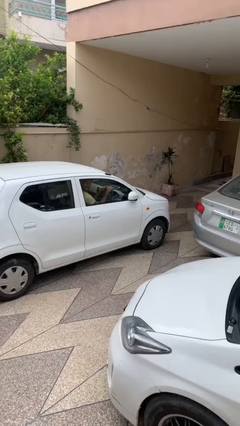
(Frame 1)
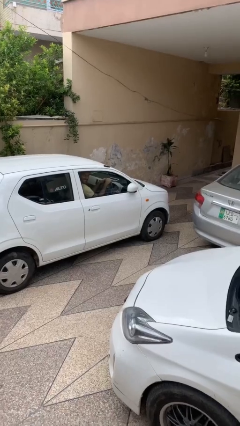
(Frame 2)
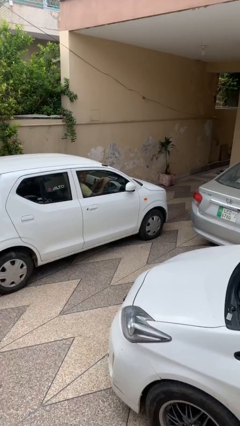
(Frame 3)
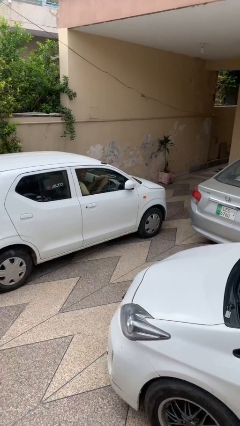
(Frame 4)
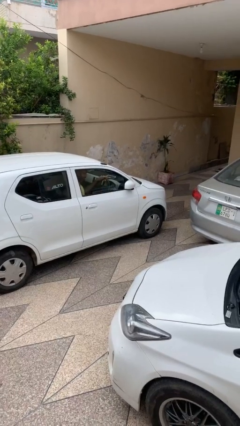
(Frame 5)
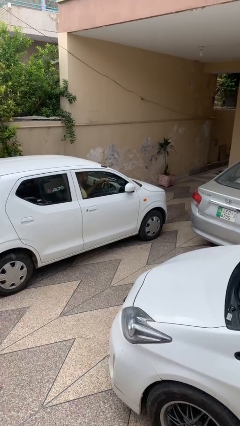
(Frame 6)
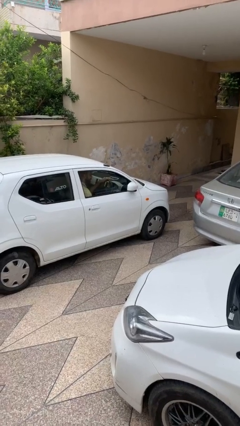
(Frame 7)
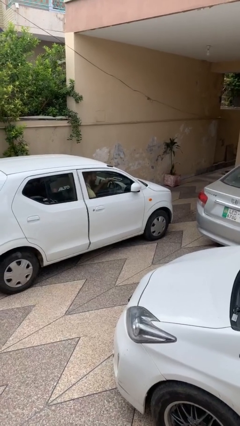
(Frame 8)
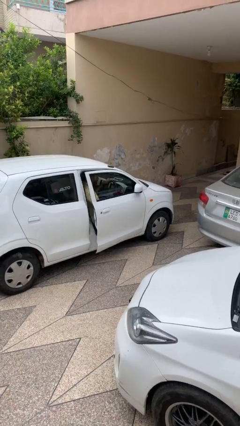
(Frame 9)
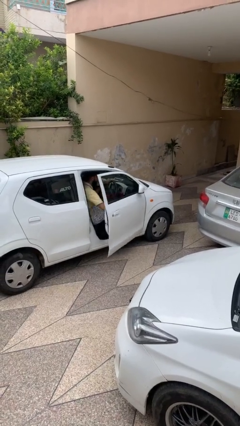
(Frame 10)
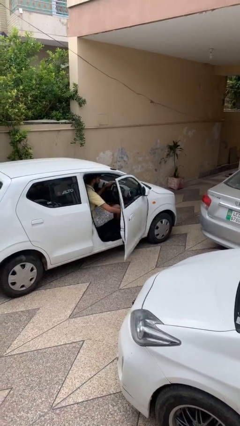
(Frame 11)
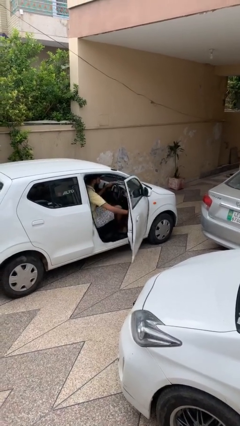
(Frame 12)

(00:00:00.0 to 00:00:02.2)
person opens car door

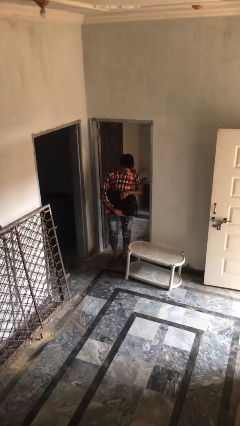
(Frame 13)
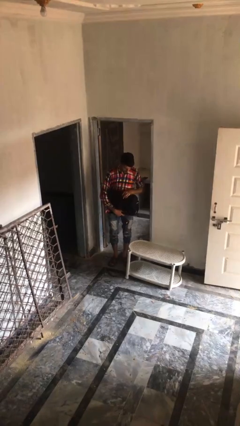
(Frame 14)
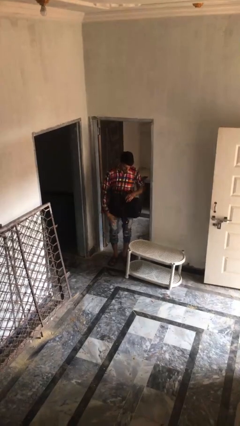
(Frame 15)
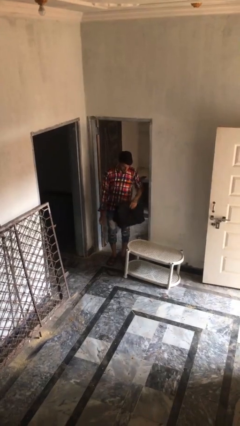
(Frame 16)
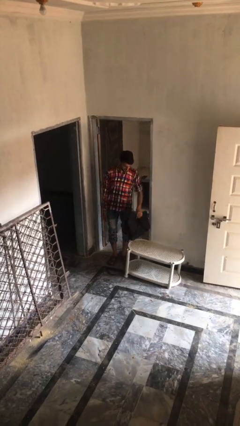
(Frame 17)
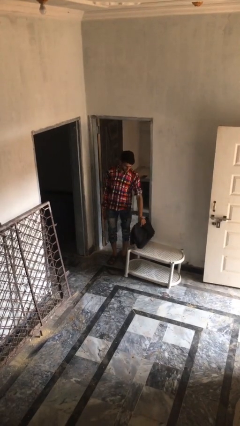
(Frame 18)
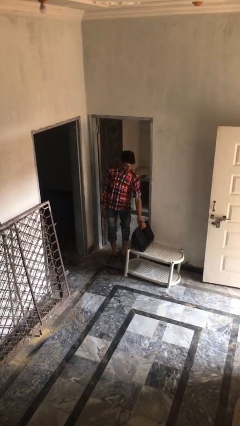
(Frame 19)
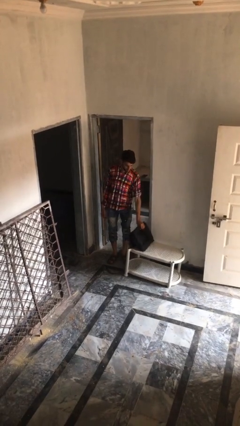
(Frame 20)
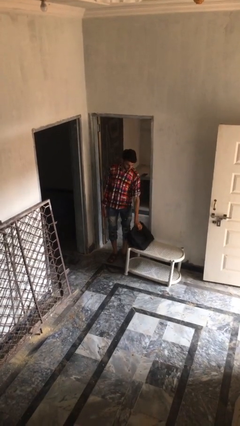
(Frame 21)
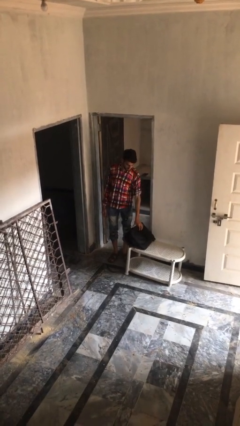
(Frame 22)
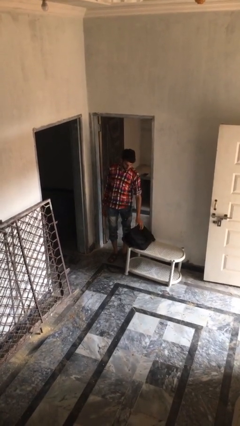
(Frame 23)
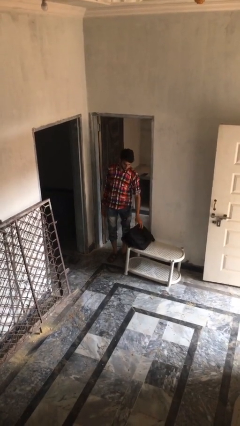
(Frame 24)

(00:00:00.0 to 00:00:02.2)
person puts down object on table

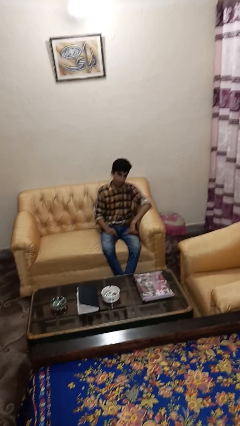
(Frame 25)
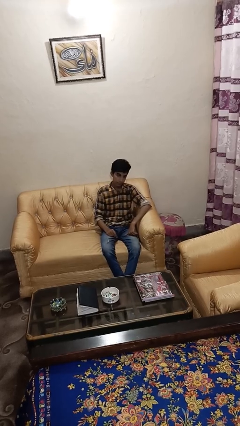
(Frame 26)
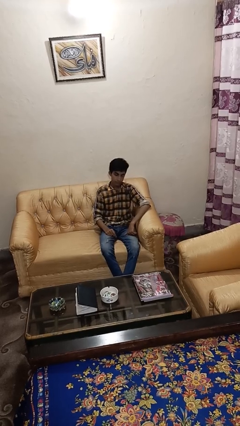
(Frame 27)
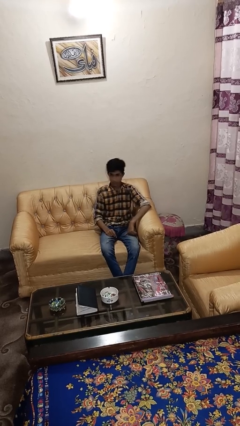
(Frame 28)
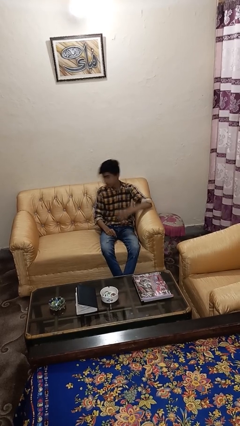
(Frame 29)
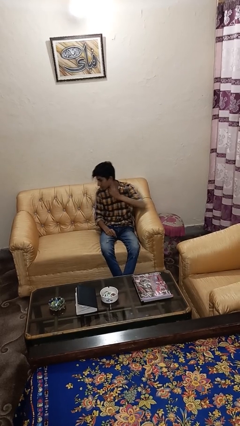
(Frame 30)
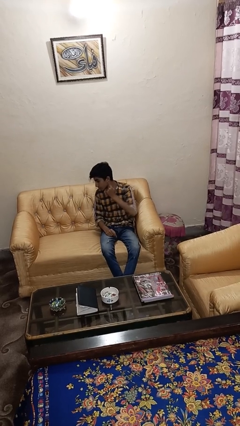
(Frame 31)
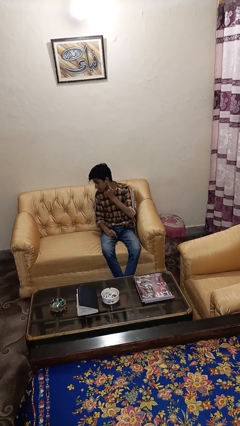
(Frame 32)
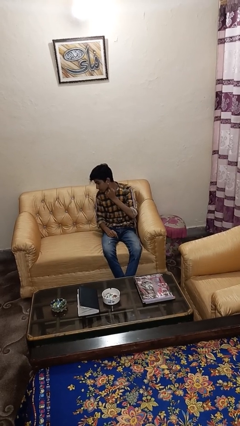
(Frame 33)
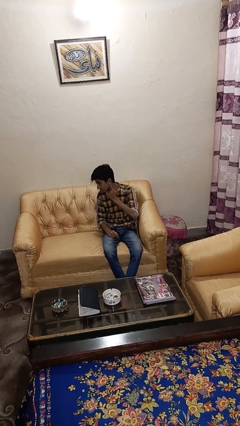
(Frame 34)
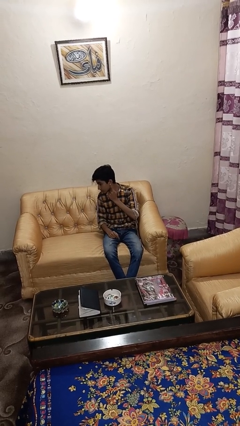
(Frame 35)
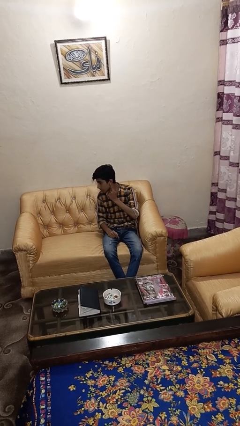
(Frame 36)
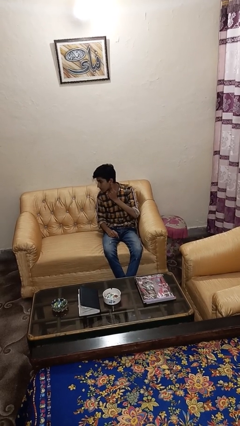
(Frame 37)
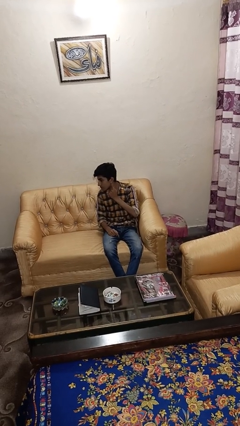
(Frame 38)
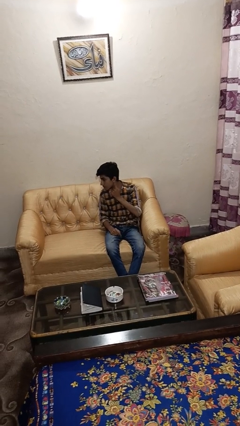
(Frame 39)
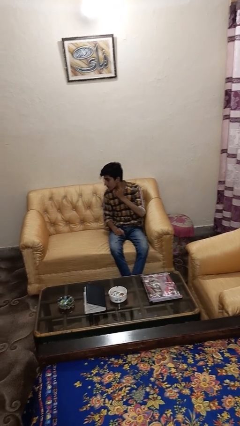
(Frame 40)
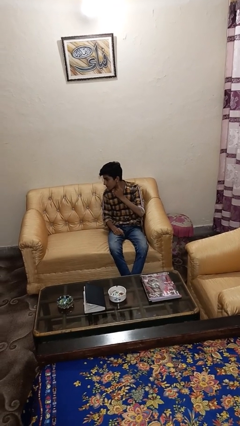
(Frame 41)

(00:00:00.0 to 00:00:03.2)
person gestures listen closely

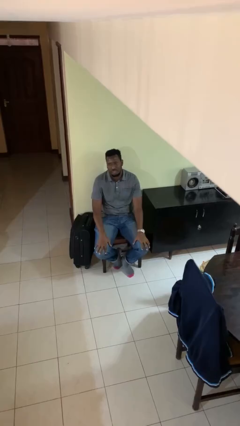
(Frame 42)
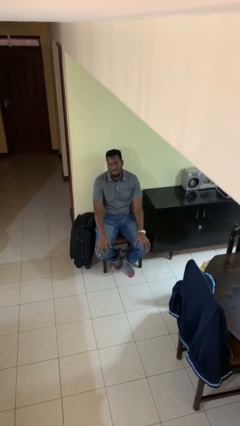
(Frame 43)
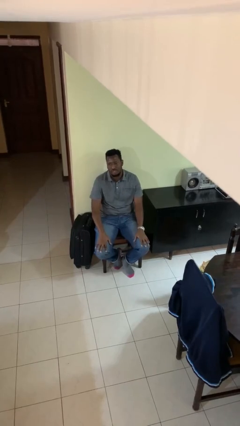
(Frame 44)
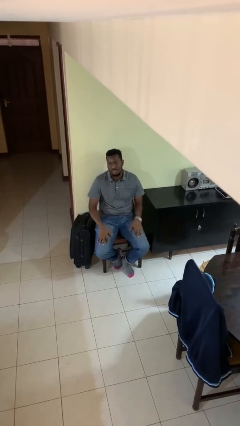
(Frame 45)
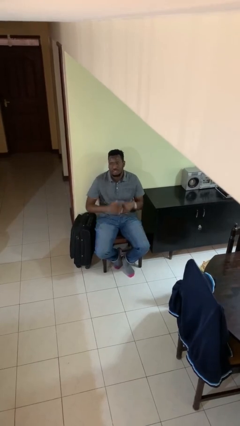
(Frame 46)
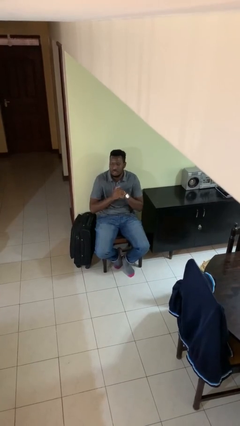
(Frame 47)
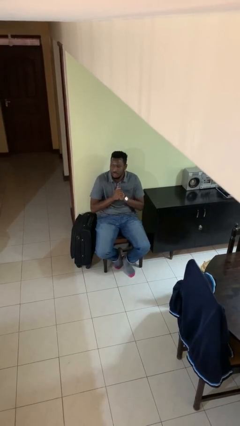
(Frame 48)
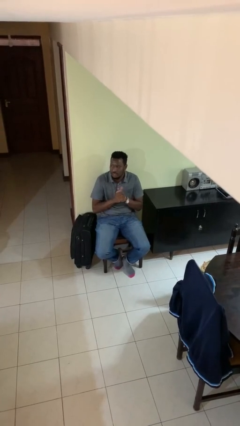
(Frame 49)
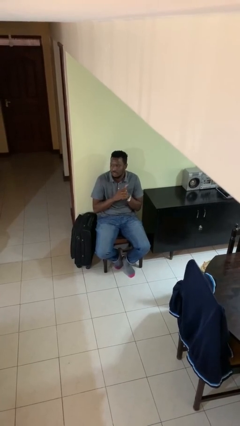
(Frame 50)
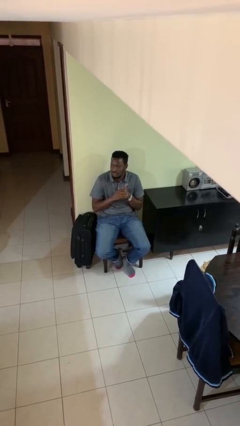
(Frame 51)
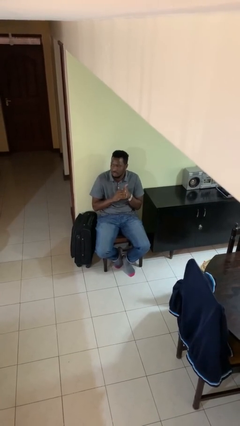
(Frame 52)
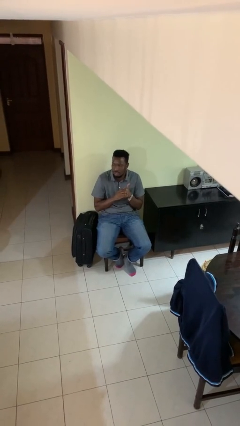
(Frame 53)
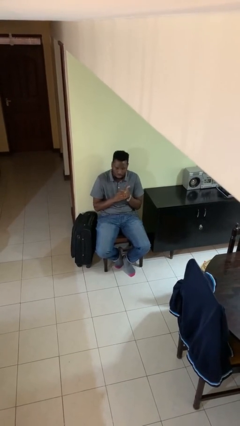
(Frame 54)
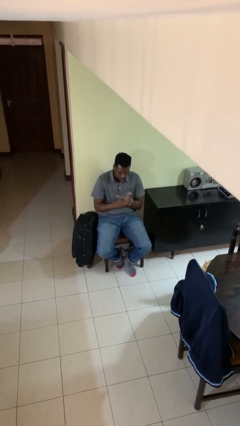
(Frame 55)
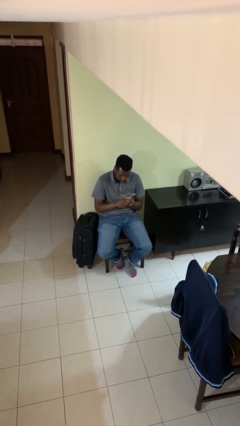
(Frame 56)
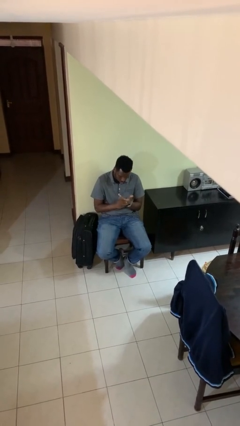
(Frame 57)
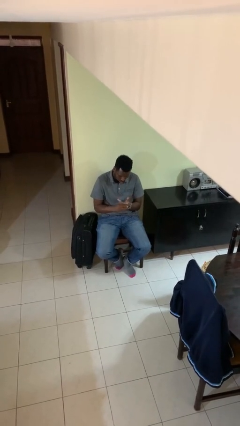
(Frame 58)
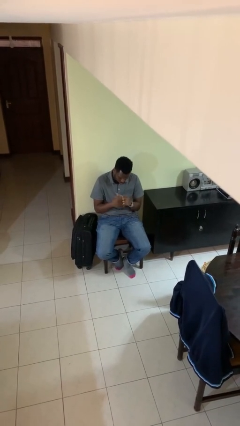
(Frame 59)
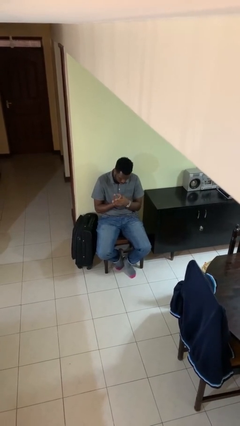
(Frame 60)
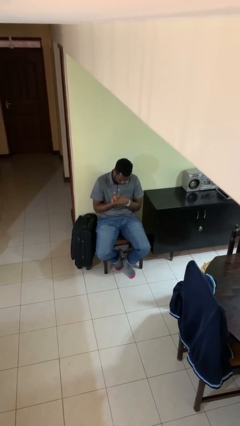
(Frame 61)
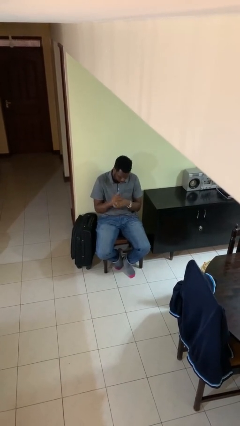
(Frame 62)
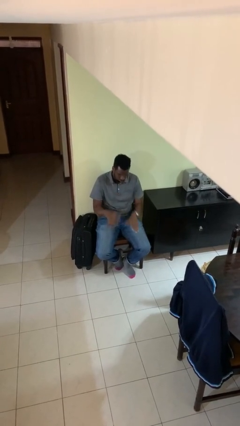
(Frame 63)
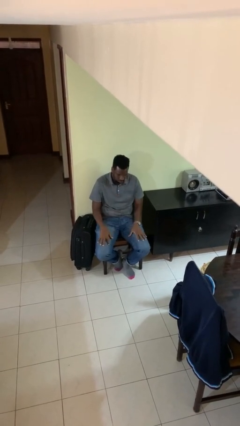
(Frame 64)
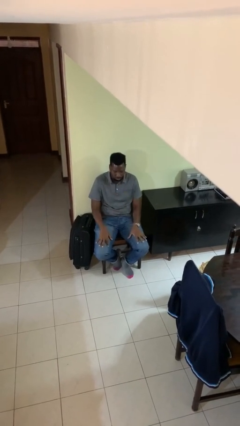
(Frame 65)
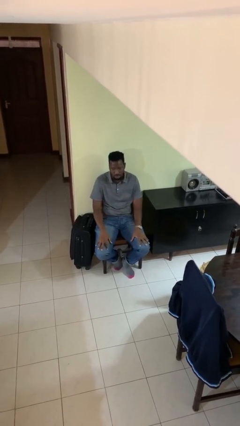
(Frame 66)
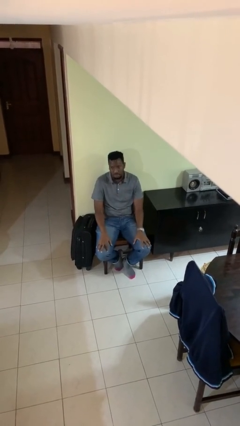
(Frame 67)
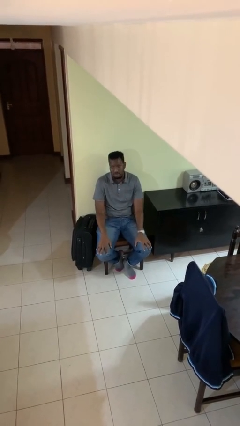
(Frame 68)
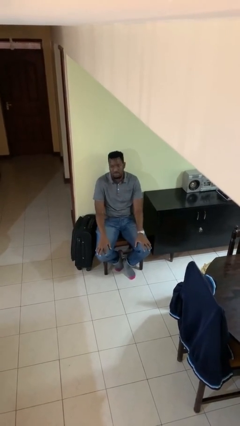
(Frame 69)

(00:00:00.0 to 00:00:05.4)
person cracks knuckles

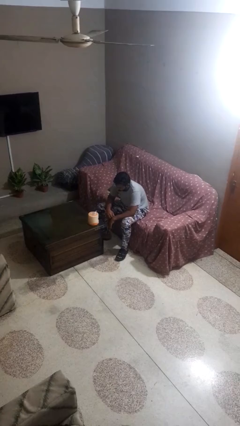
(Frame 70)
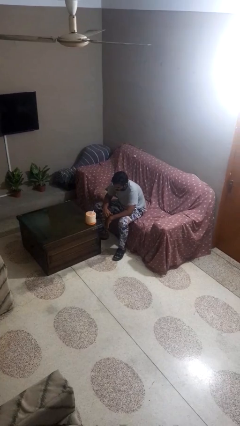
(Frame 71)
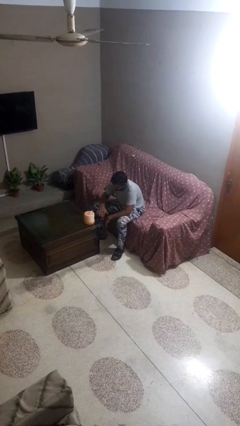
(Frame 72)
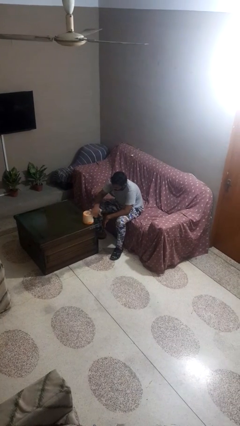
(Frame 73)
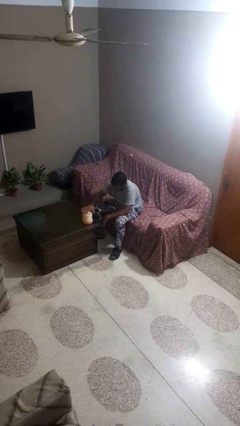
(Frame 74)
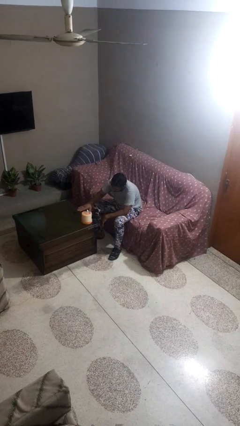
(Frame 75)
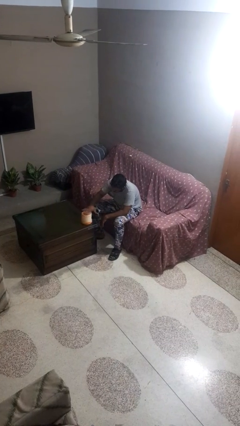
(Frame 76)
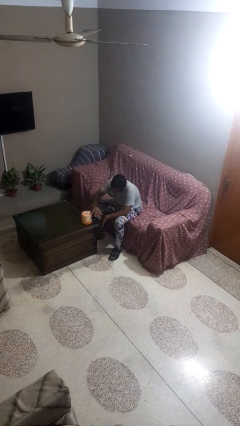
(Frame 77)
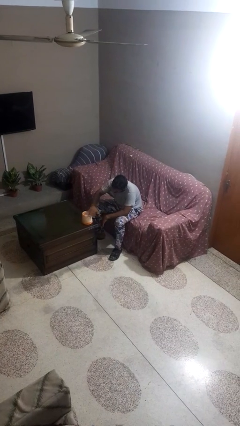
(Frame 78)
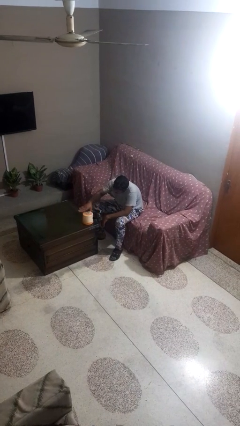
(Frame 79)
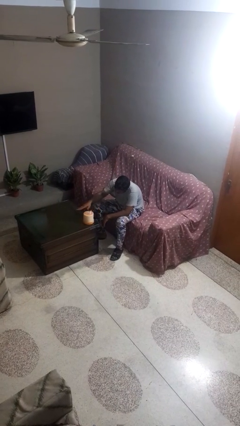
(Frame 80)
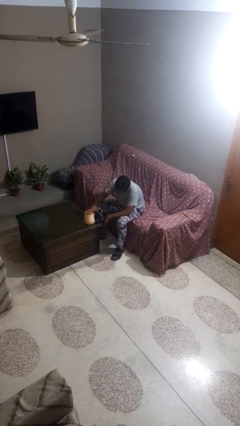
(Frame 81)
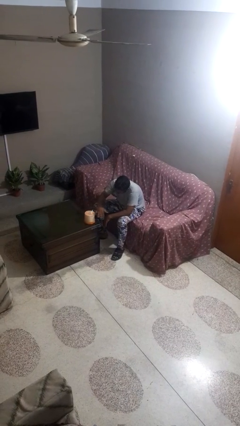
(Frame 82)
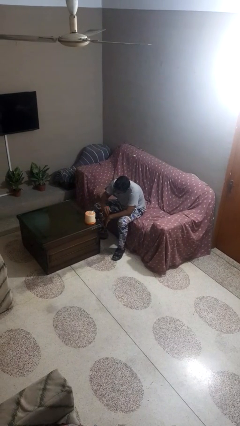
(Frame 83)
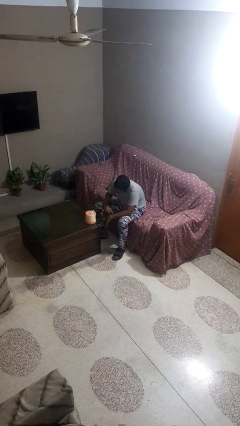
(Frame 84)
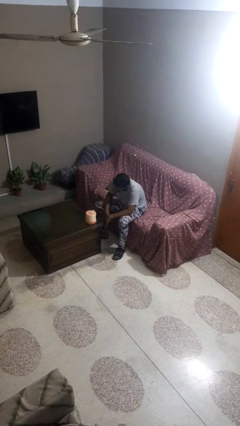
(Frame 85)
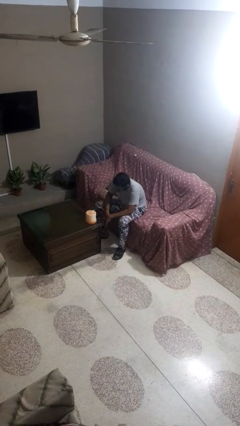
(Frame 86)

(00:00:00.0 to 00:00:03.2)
person waves hand over object

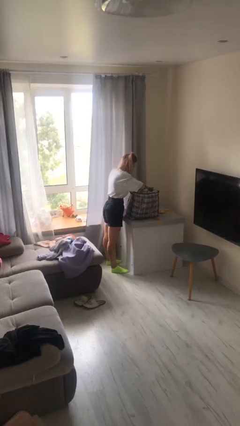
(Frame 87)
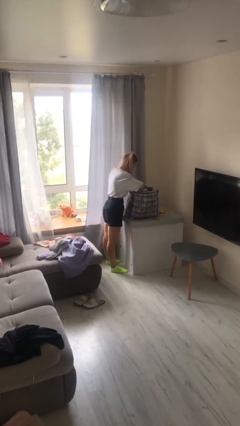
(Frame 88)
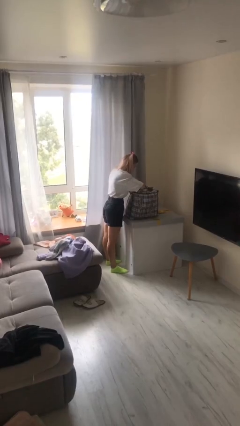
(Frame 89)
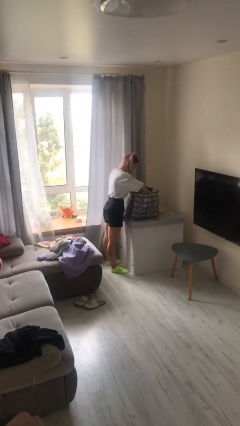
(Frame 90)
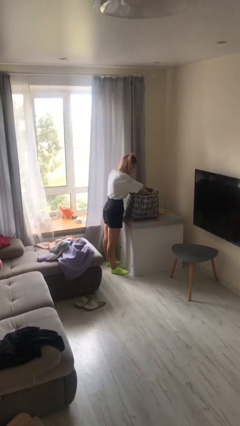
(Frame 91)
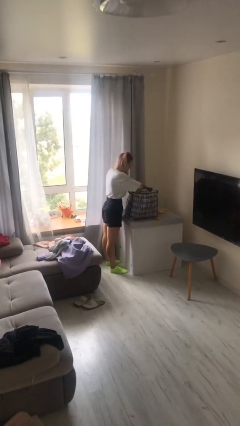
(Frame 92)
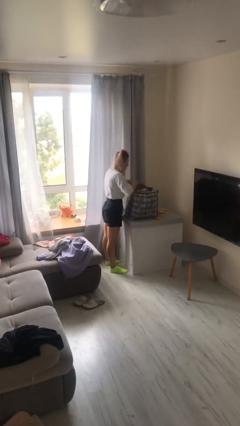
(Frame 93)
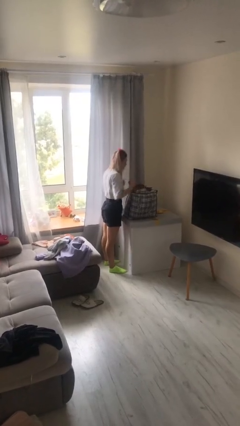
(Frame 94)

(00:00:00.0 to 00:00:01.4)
person searches in bag
